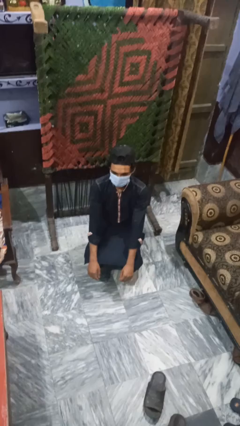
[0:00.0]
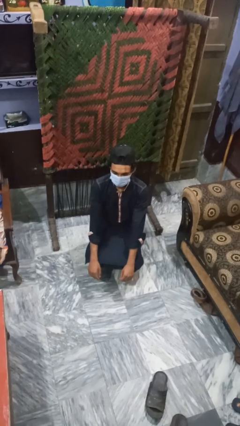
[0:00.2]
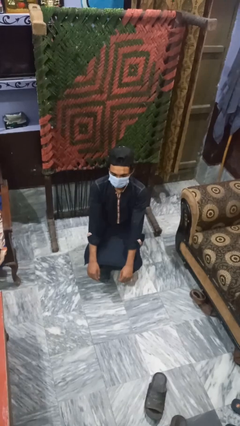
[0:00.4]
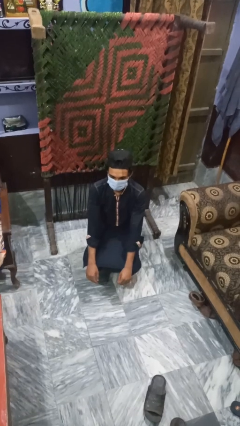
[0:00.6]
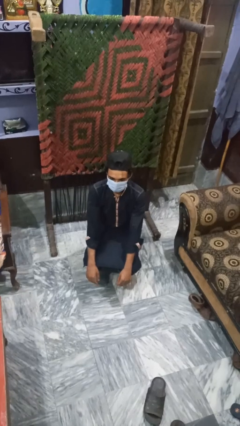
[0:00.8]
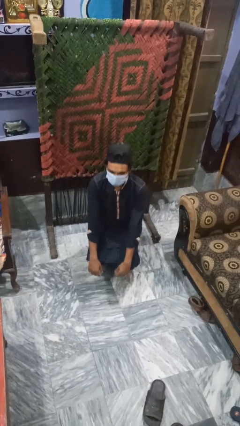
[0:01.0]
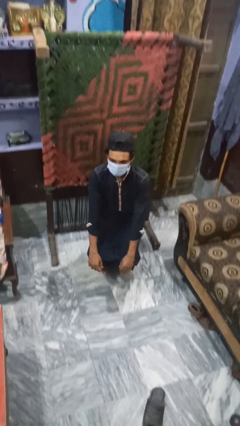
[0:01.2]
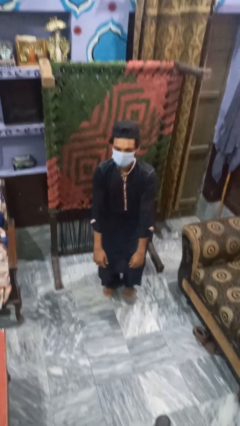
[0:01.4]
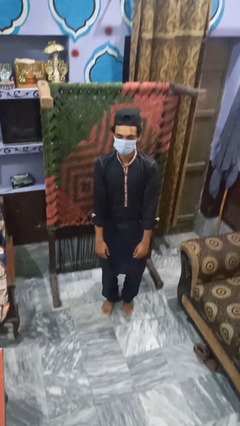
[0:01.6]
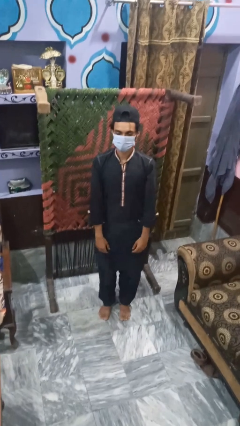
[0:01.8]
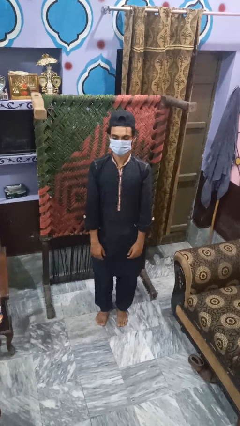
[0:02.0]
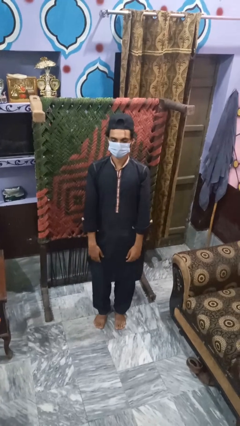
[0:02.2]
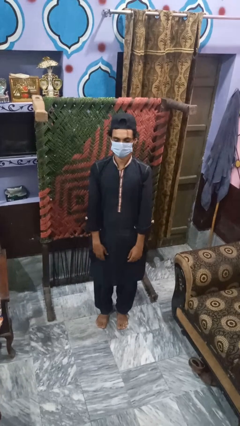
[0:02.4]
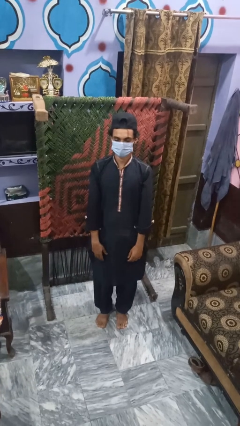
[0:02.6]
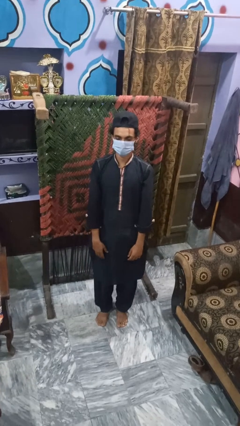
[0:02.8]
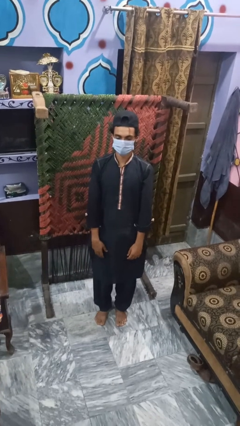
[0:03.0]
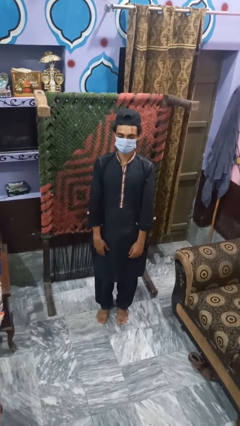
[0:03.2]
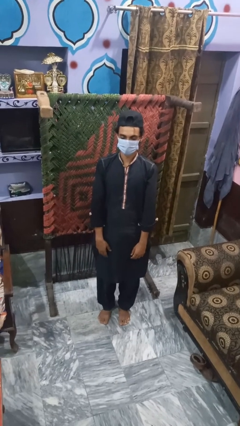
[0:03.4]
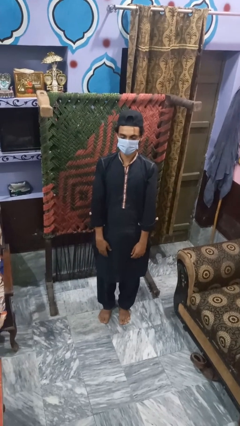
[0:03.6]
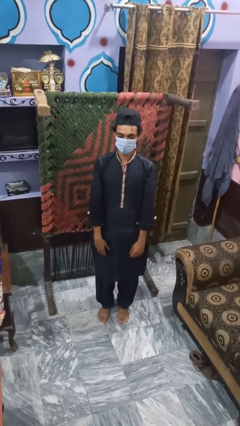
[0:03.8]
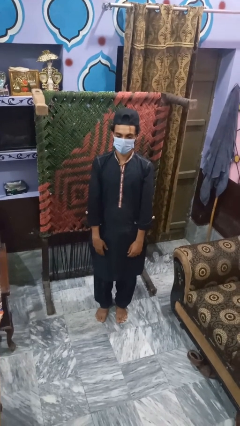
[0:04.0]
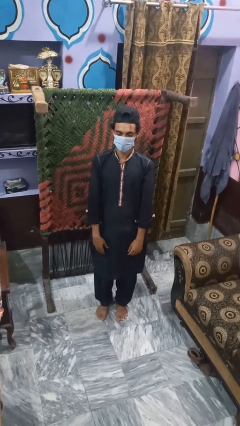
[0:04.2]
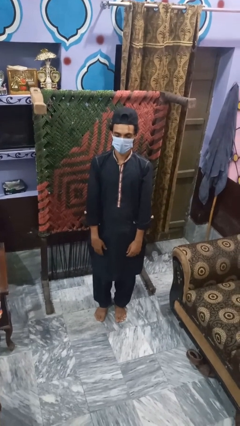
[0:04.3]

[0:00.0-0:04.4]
person stands up

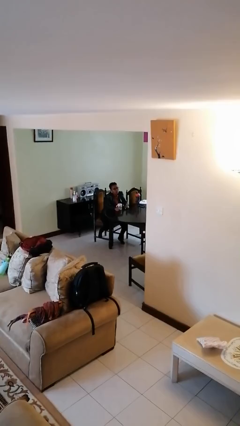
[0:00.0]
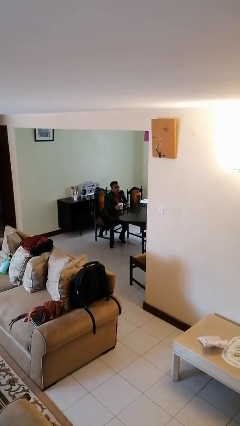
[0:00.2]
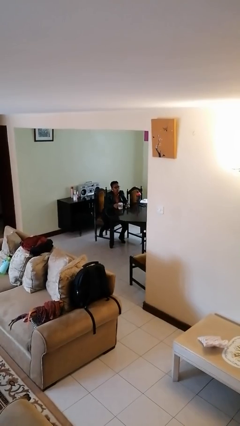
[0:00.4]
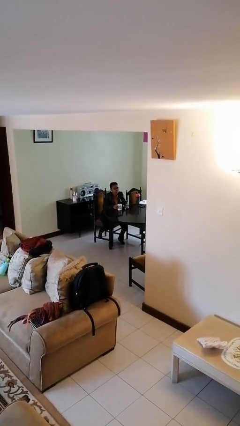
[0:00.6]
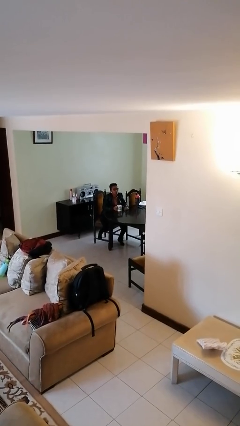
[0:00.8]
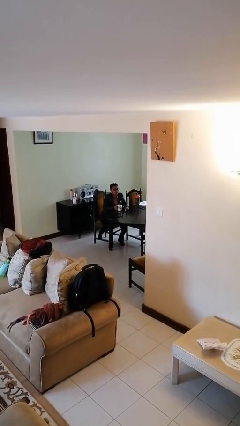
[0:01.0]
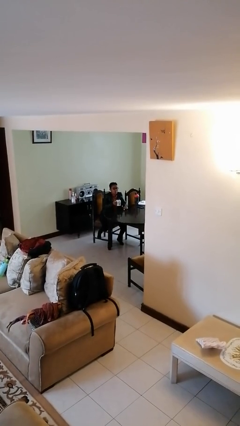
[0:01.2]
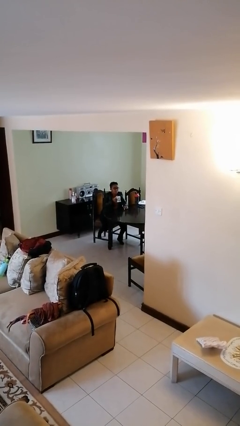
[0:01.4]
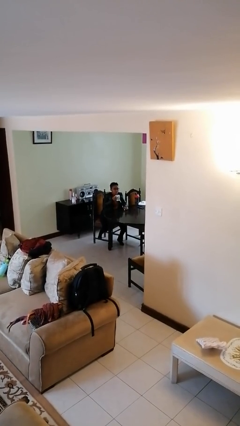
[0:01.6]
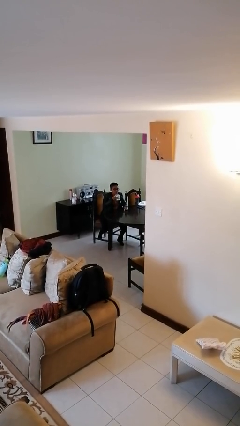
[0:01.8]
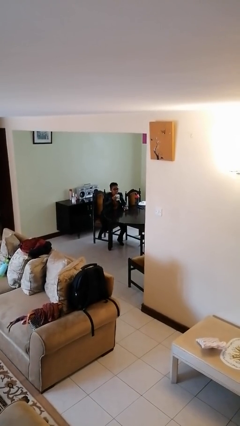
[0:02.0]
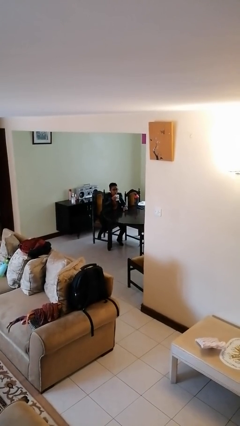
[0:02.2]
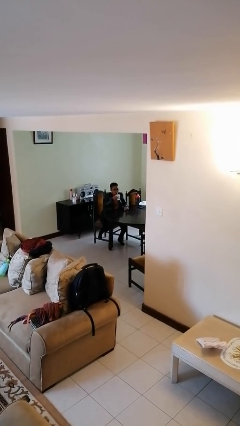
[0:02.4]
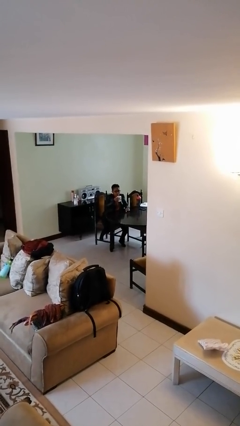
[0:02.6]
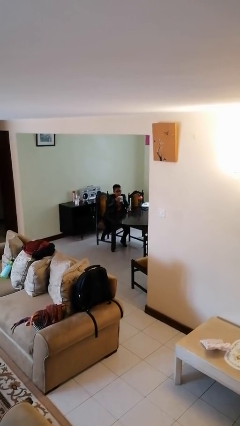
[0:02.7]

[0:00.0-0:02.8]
person picks up object from table

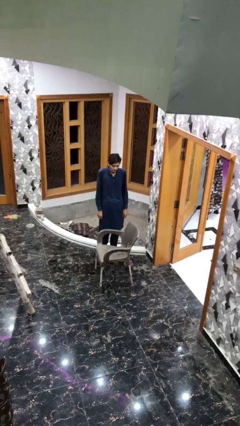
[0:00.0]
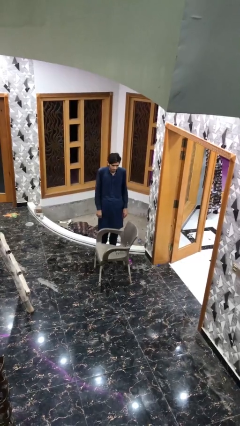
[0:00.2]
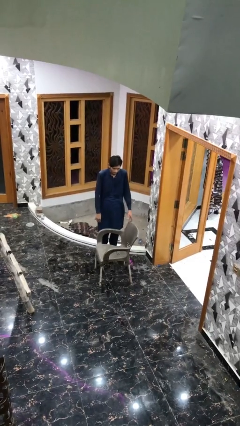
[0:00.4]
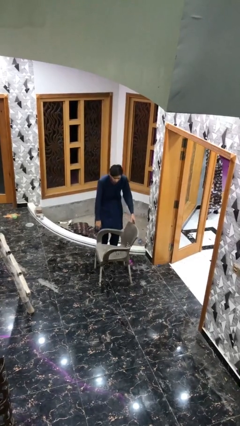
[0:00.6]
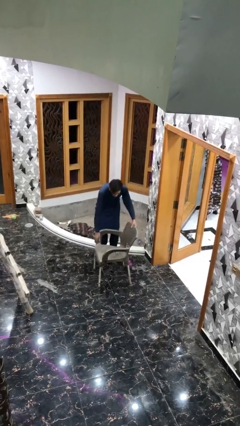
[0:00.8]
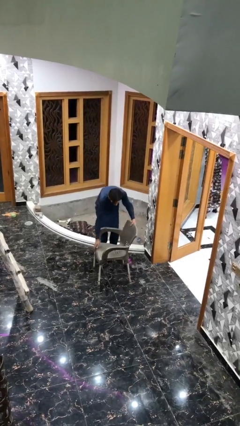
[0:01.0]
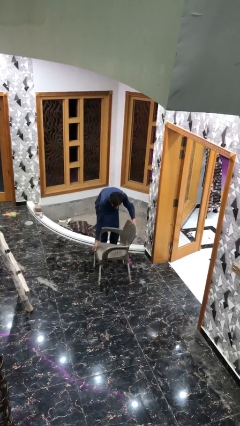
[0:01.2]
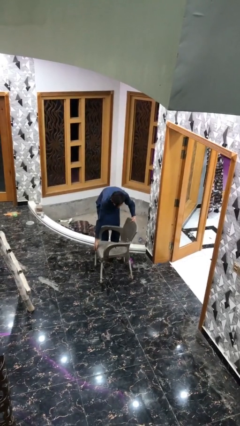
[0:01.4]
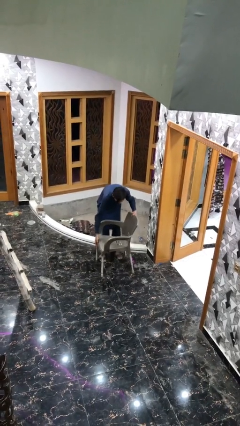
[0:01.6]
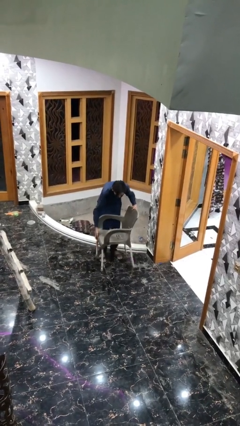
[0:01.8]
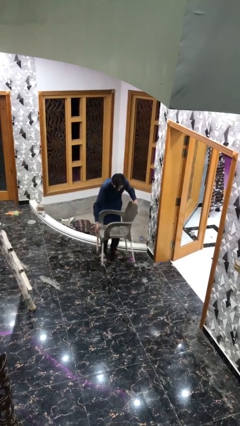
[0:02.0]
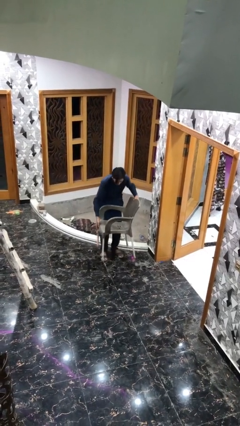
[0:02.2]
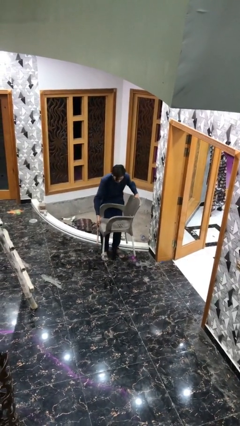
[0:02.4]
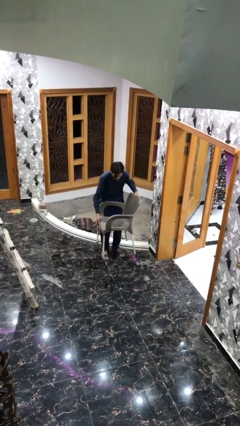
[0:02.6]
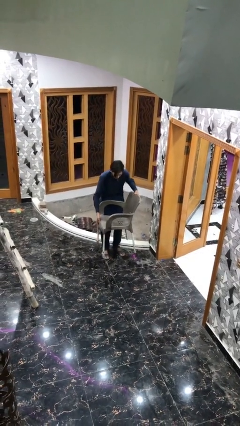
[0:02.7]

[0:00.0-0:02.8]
person picks up object from floor

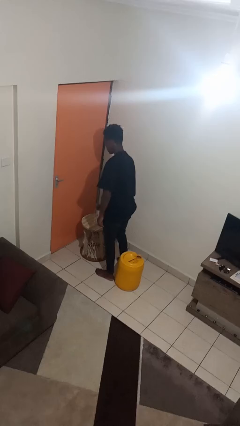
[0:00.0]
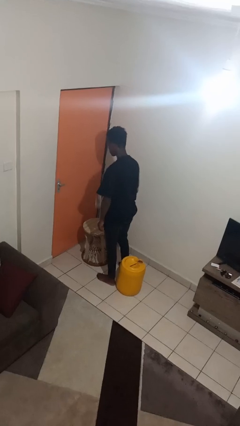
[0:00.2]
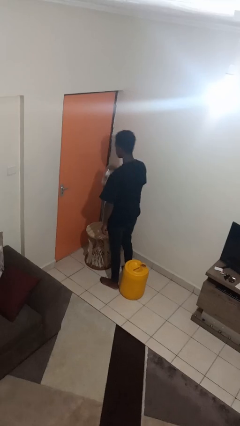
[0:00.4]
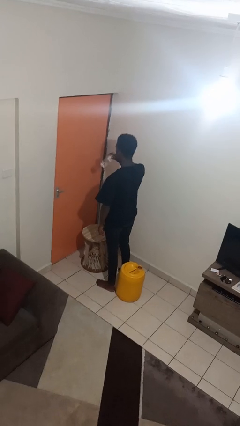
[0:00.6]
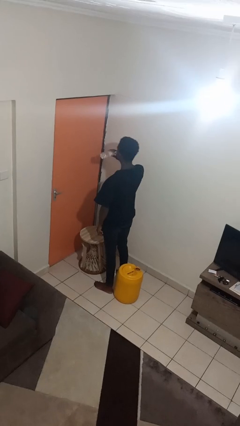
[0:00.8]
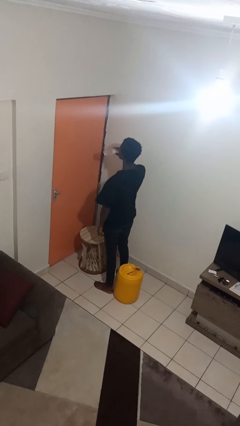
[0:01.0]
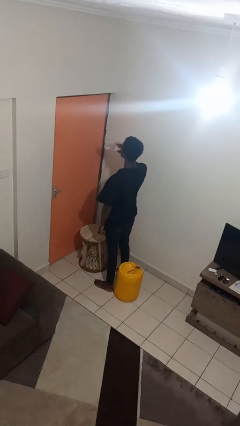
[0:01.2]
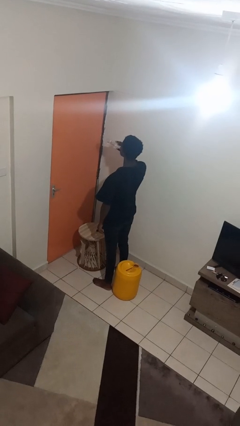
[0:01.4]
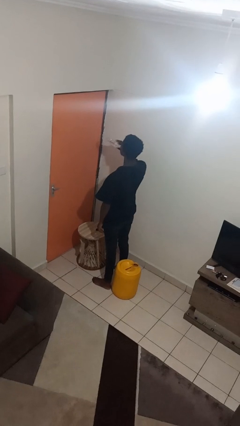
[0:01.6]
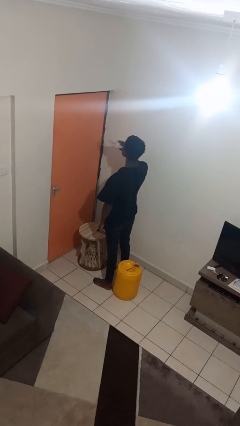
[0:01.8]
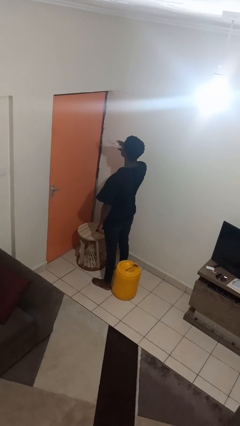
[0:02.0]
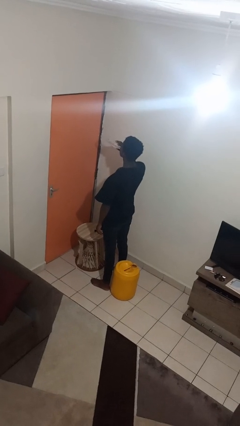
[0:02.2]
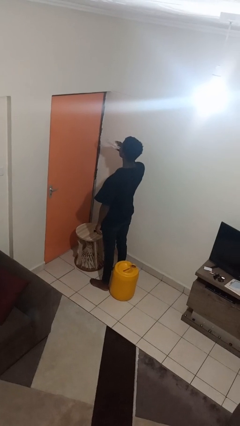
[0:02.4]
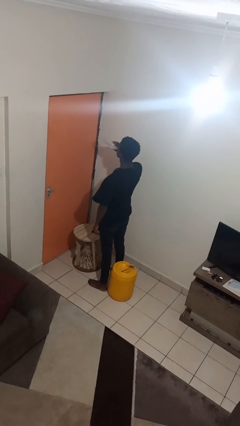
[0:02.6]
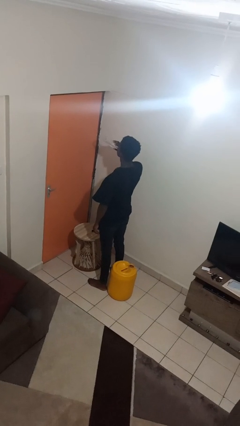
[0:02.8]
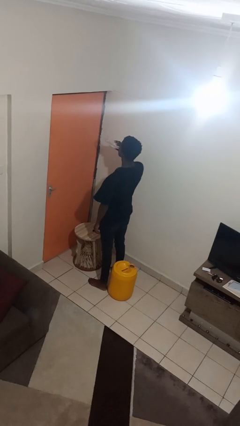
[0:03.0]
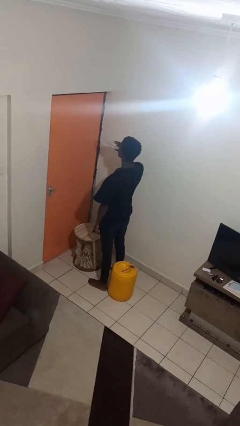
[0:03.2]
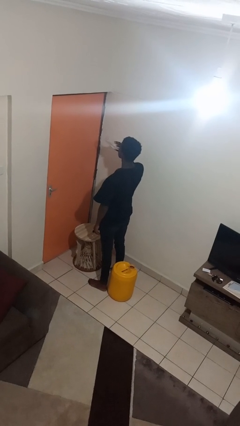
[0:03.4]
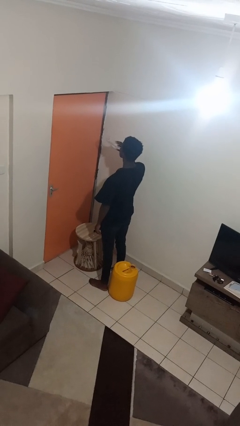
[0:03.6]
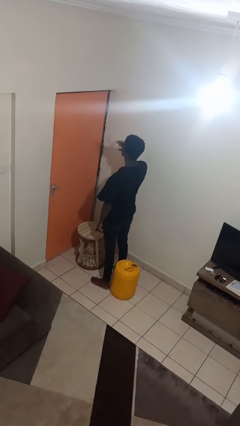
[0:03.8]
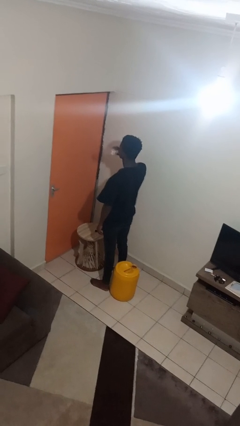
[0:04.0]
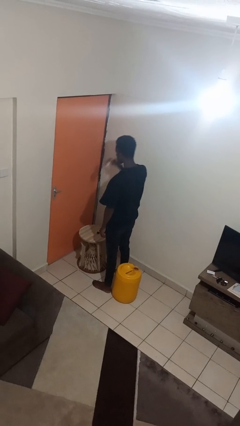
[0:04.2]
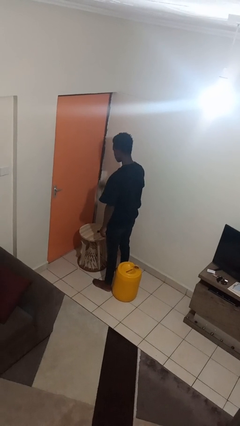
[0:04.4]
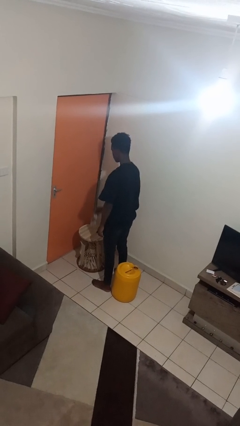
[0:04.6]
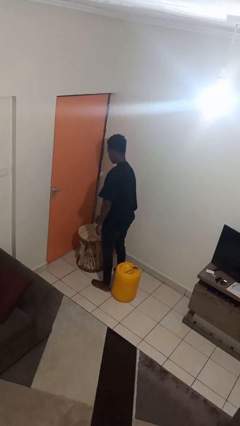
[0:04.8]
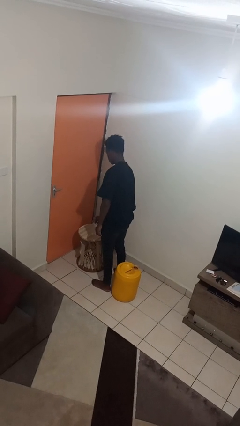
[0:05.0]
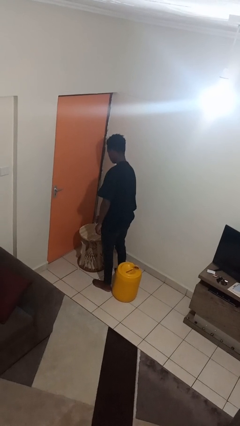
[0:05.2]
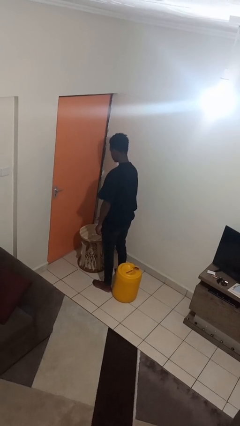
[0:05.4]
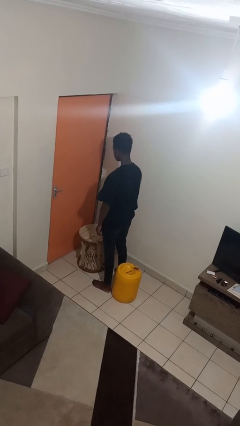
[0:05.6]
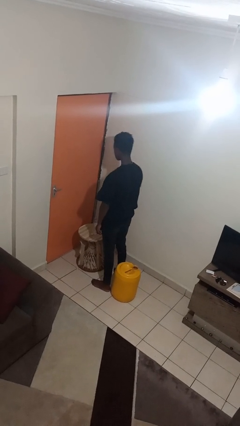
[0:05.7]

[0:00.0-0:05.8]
person drinks from bottle

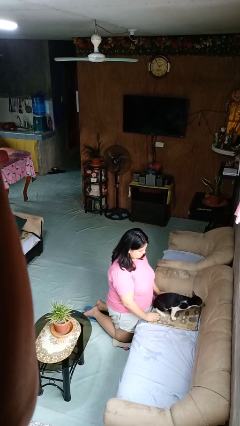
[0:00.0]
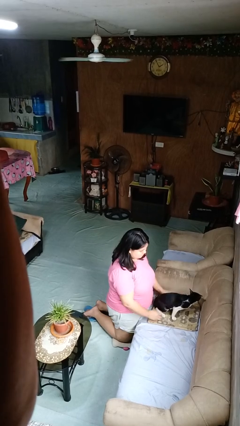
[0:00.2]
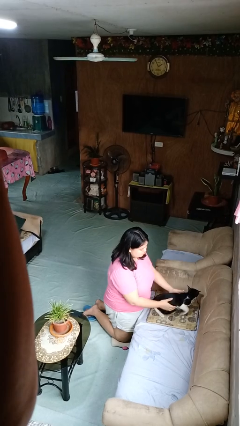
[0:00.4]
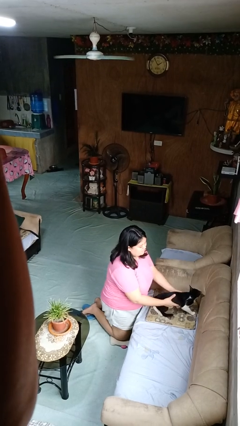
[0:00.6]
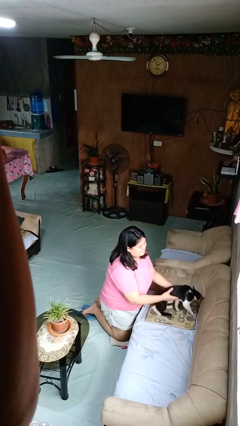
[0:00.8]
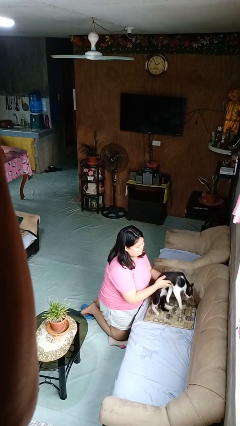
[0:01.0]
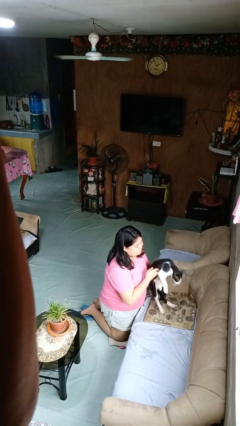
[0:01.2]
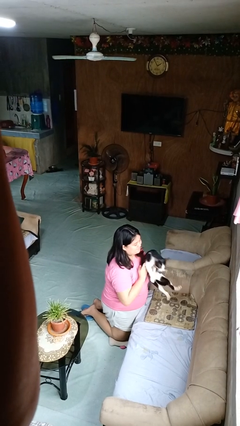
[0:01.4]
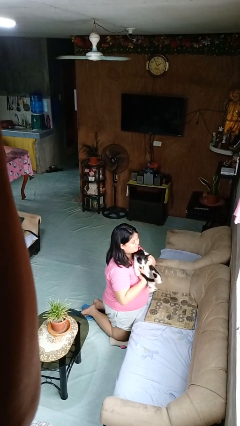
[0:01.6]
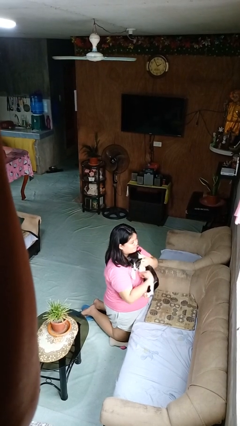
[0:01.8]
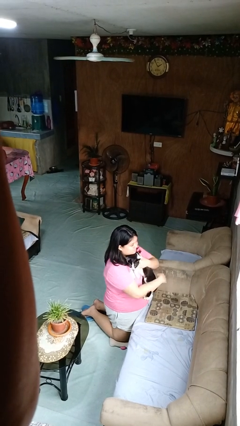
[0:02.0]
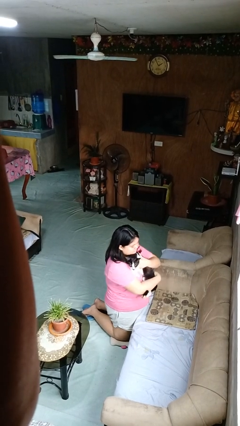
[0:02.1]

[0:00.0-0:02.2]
person hugs cat
